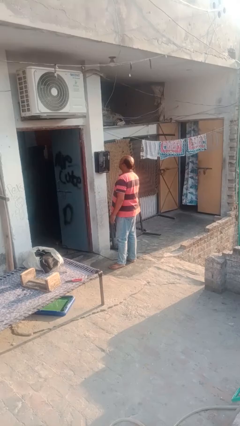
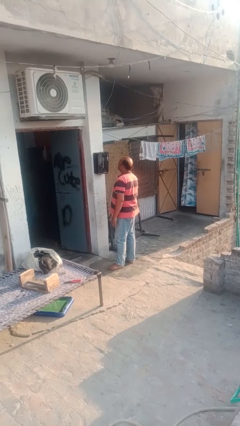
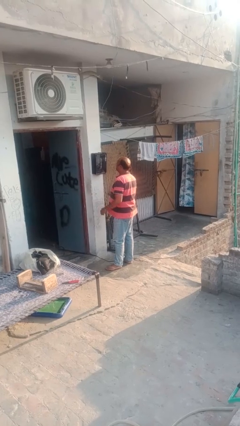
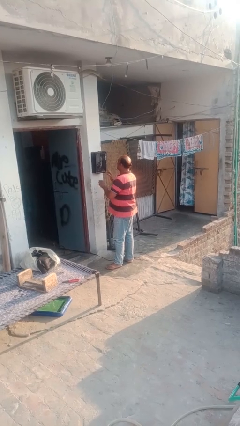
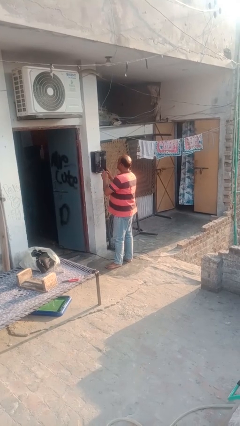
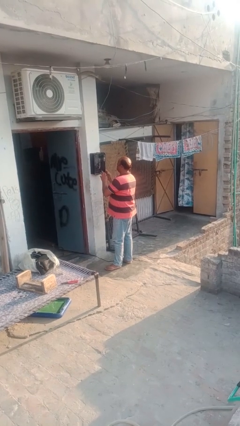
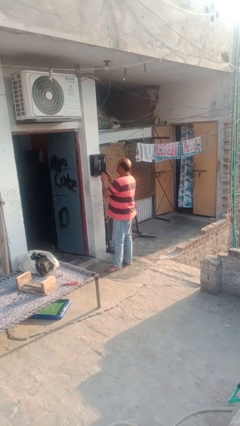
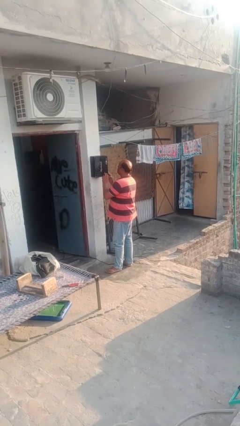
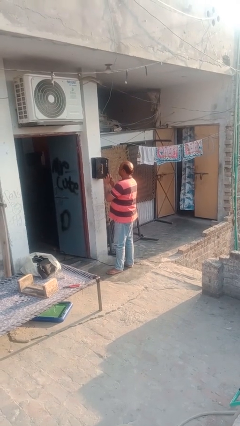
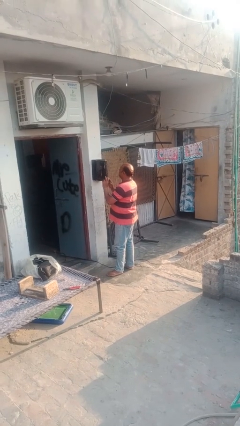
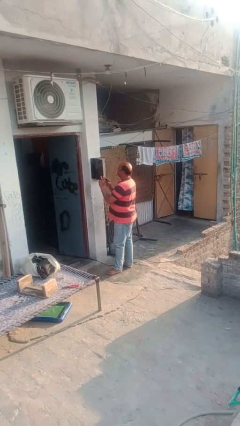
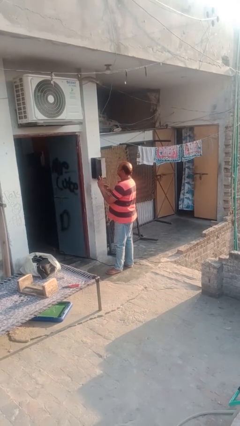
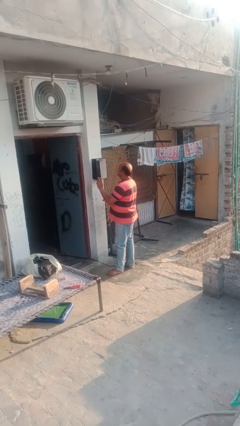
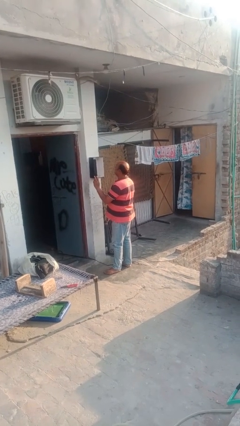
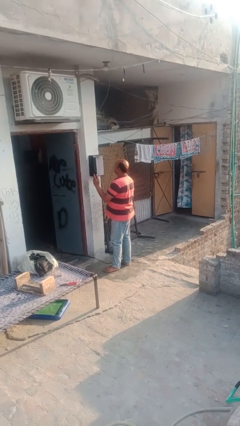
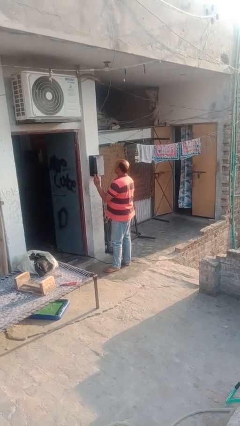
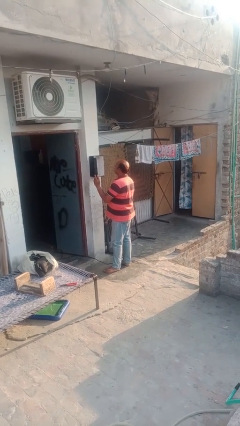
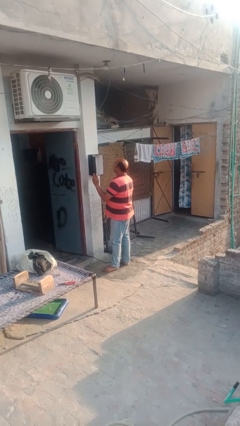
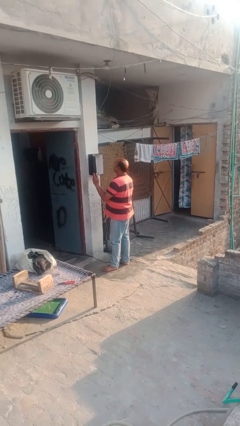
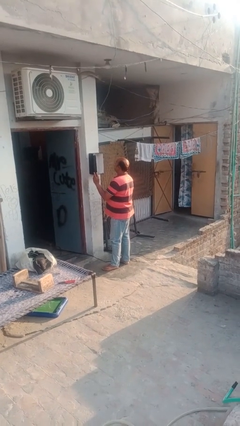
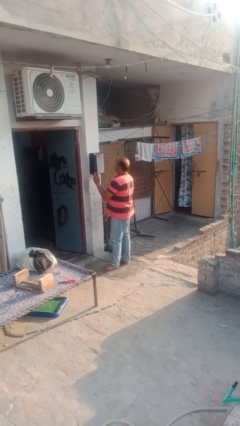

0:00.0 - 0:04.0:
person opens mailbox

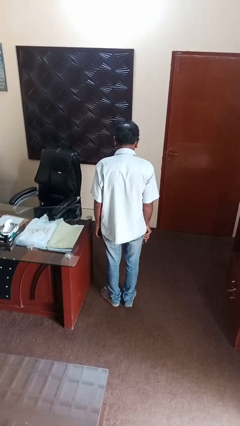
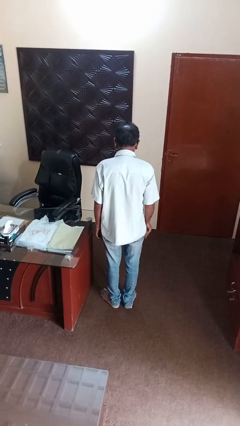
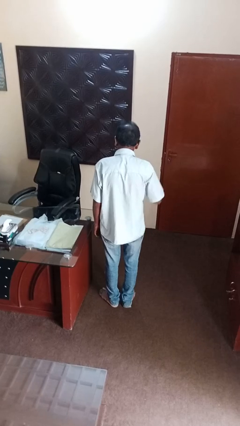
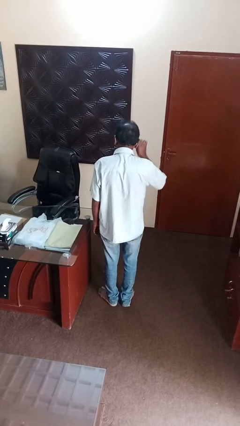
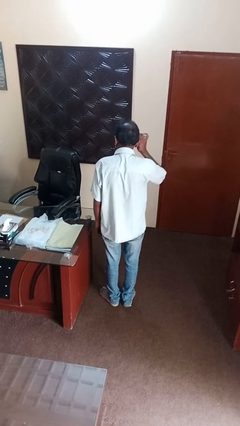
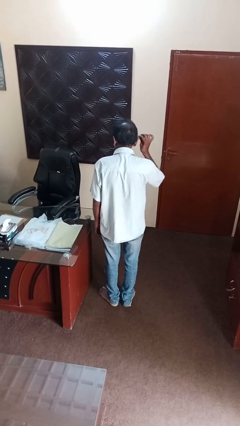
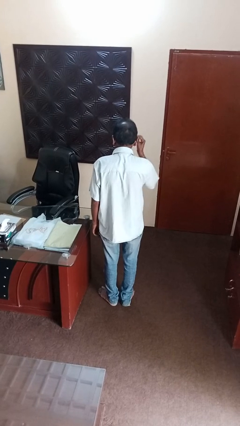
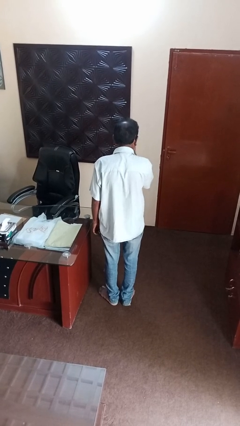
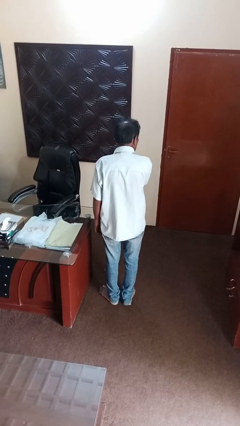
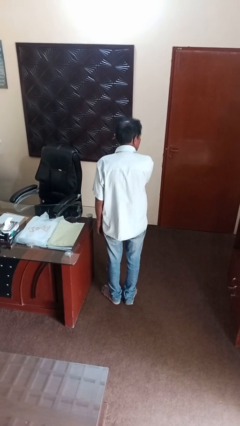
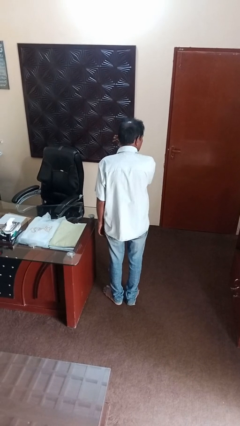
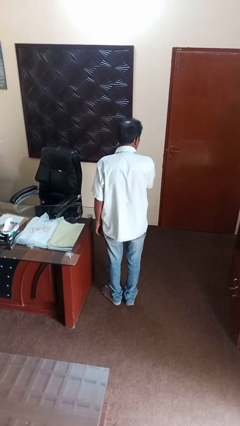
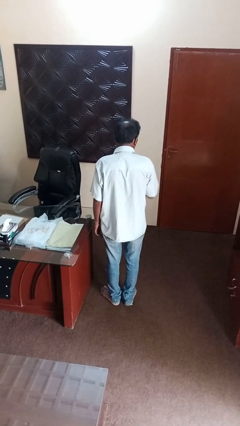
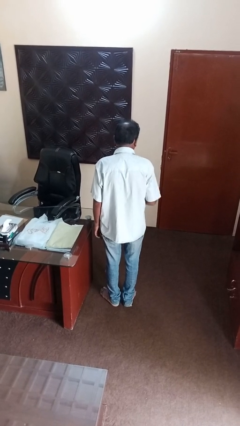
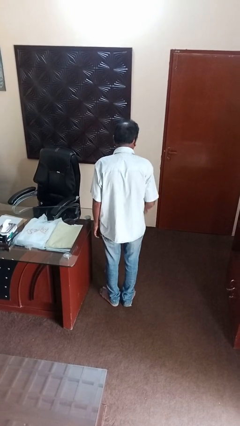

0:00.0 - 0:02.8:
person applies eye makeup

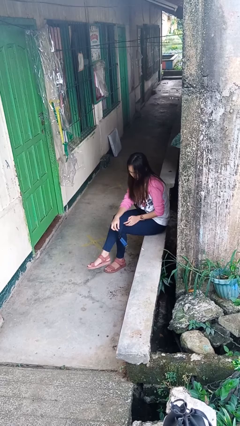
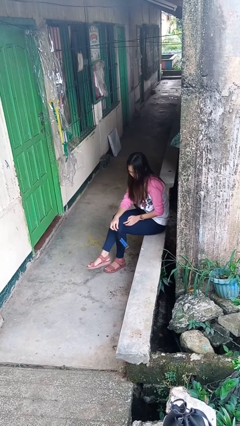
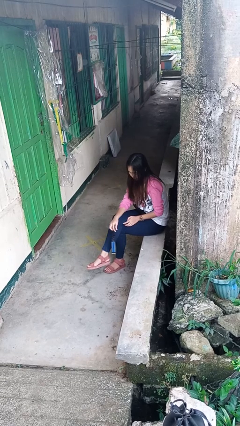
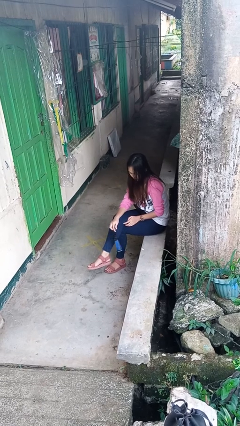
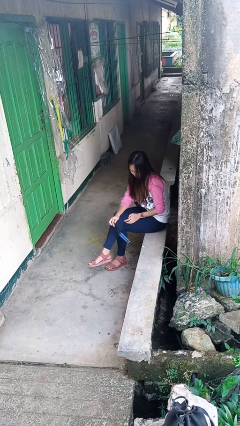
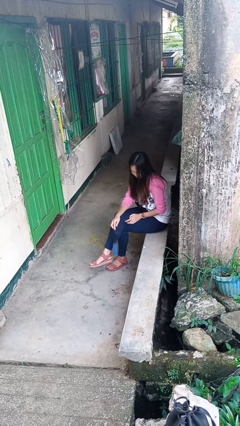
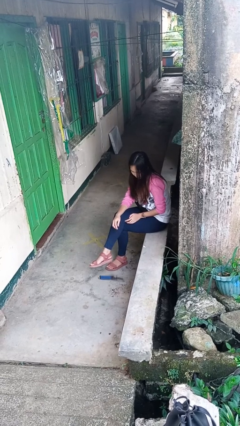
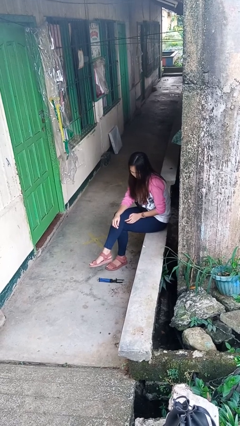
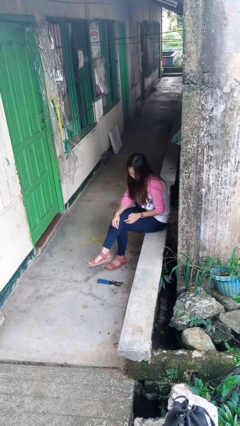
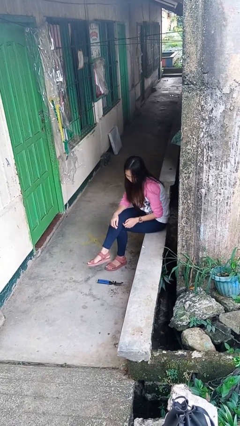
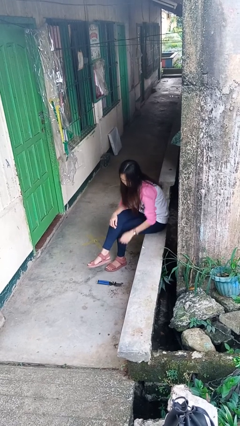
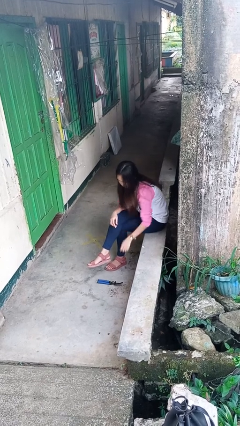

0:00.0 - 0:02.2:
person drops object

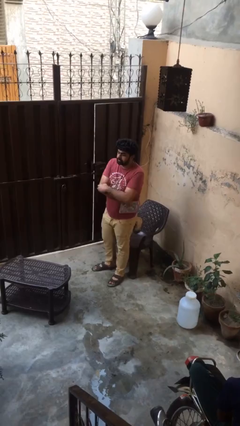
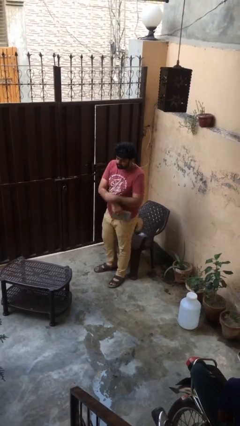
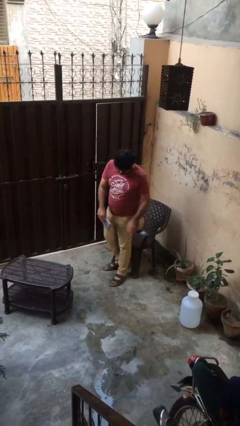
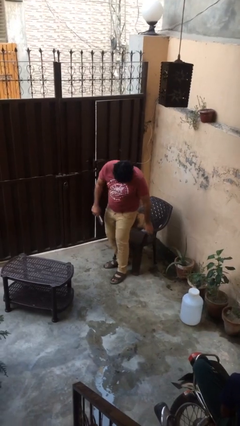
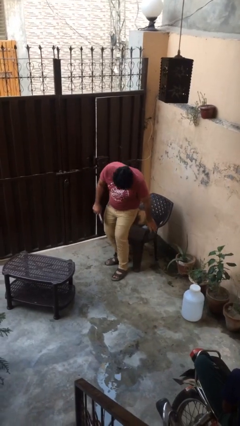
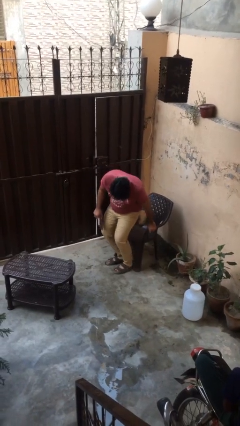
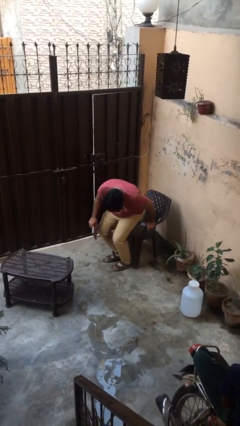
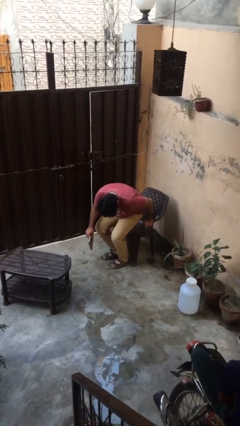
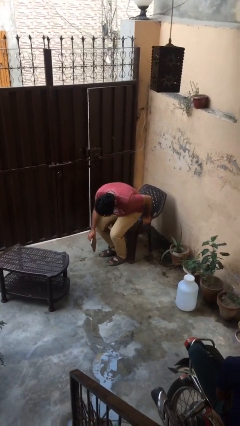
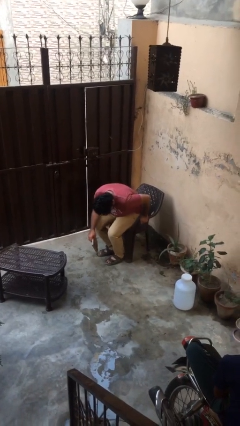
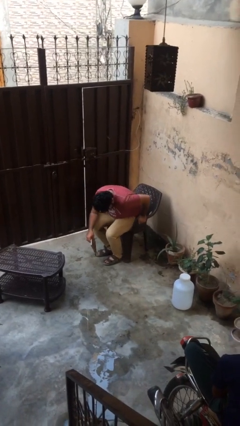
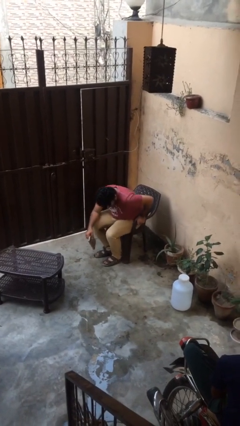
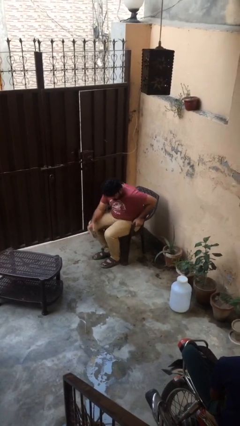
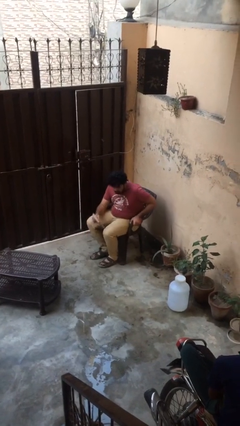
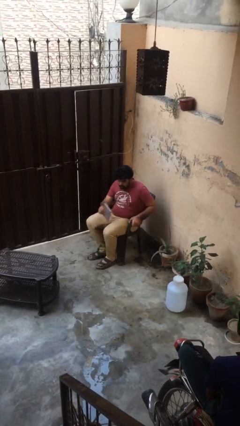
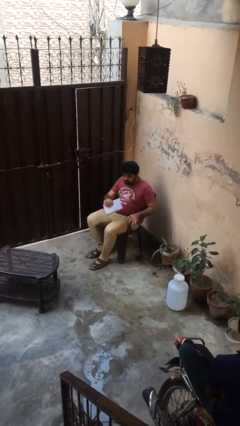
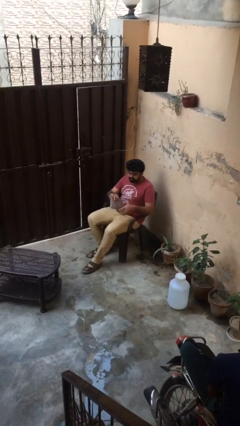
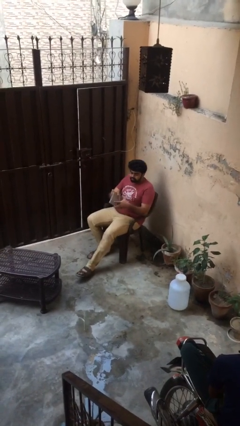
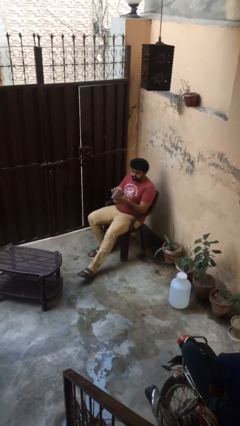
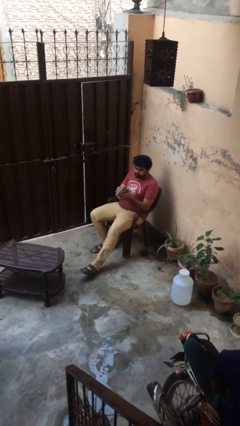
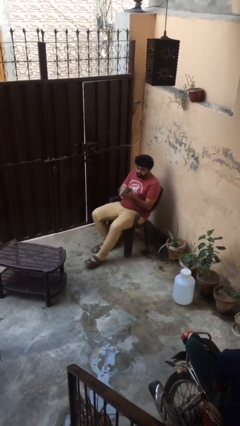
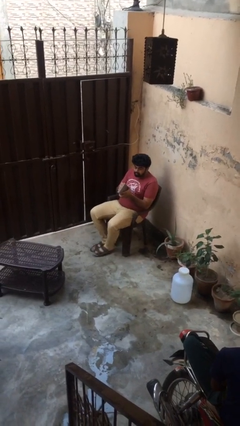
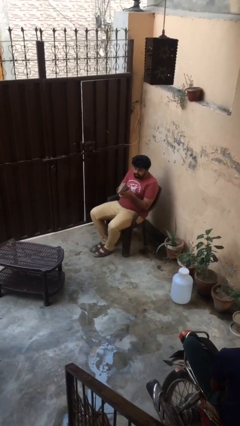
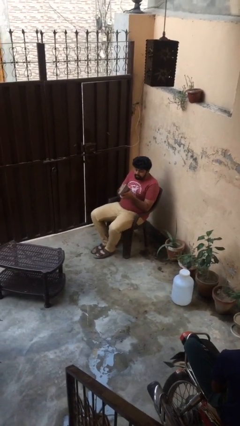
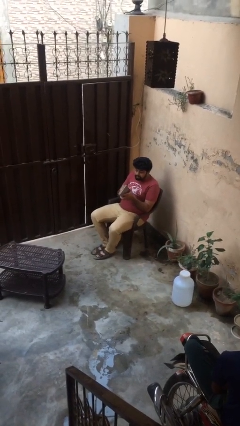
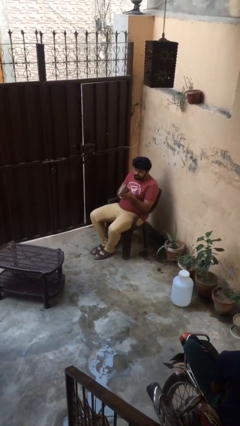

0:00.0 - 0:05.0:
person sits down

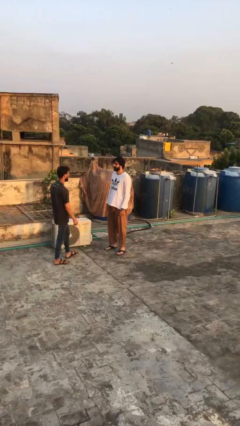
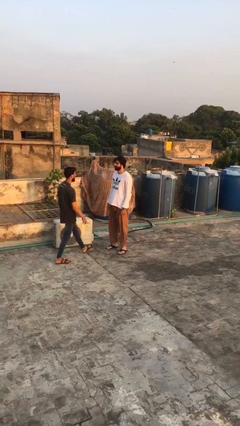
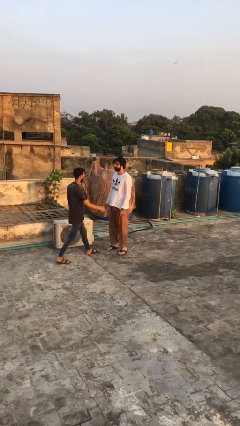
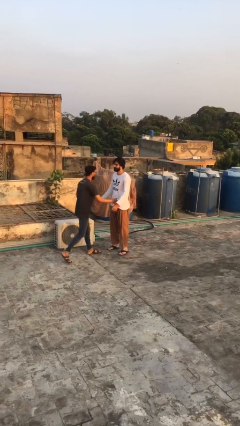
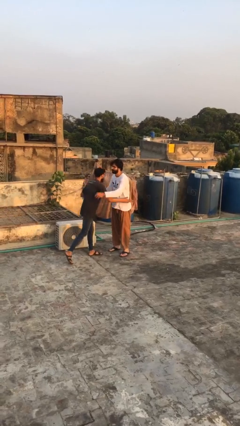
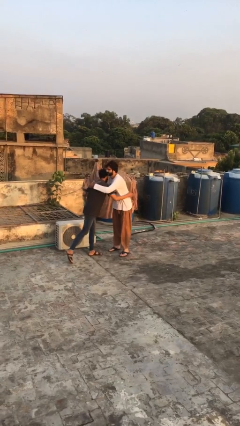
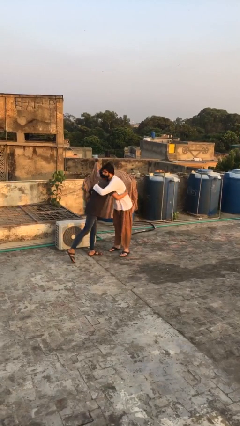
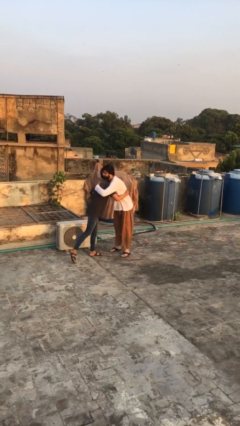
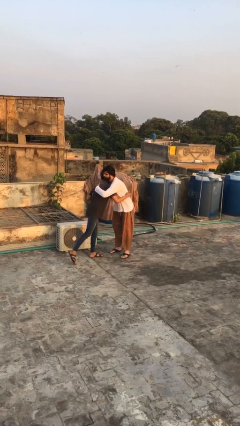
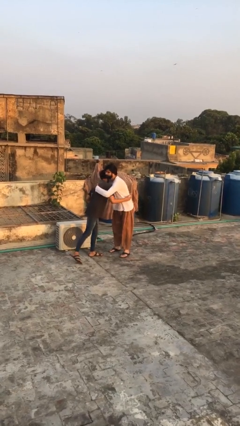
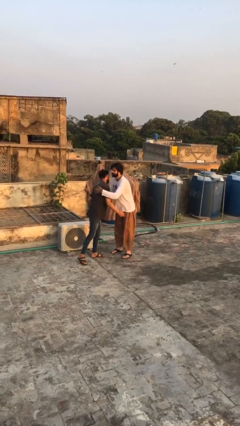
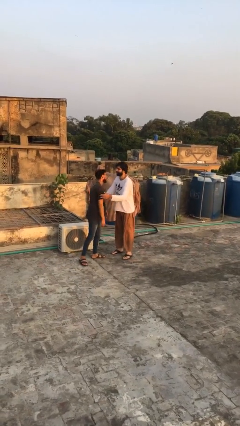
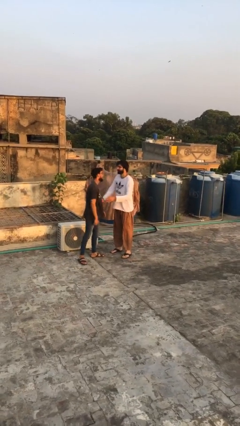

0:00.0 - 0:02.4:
person embraces person

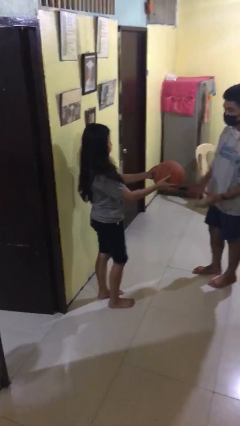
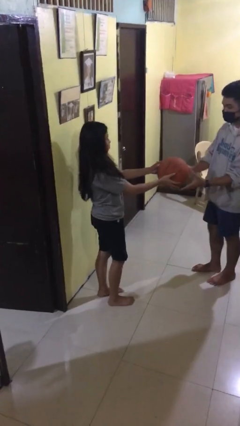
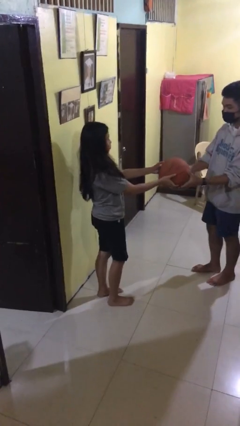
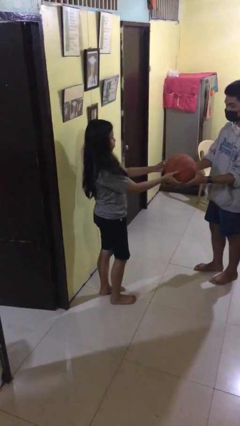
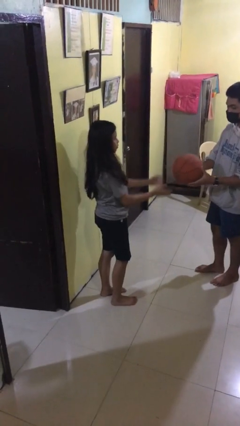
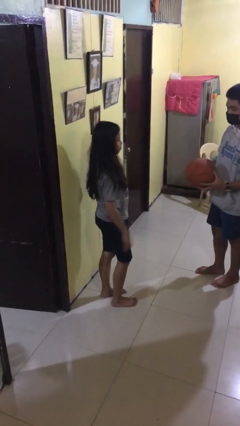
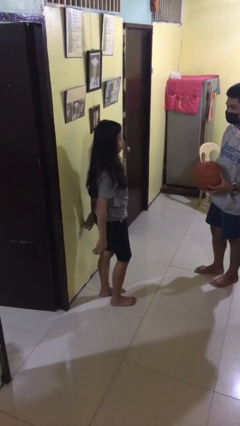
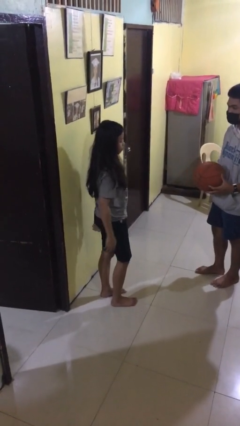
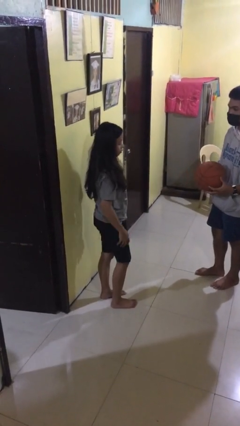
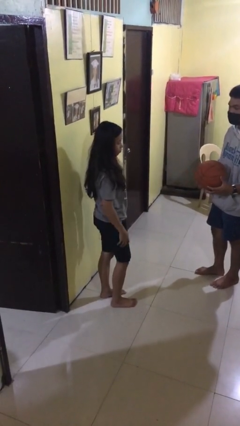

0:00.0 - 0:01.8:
person transfers object to person
